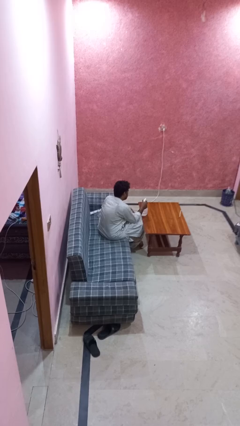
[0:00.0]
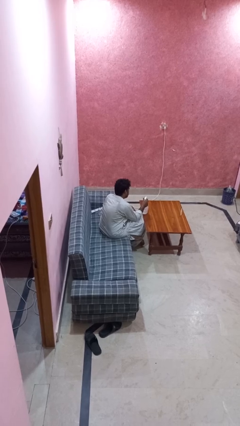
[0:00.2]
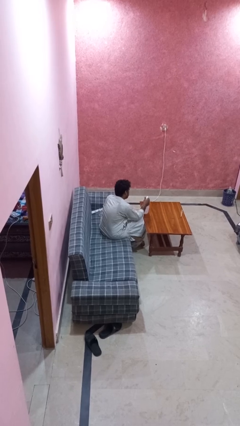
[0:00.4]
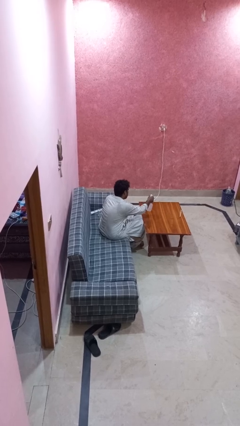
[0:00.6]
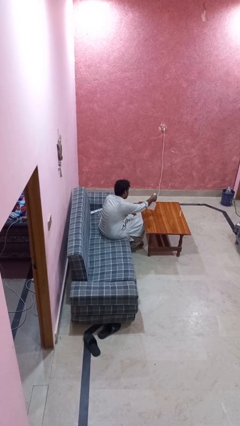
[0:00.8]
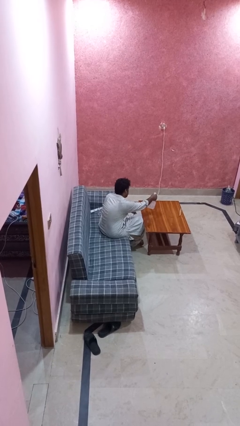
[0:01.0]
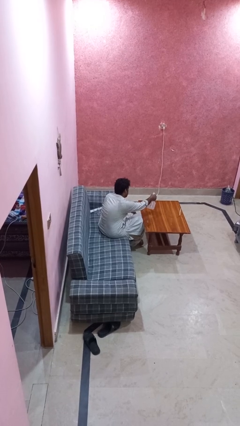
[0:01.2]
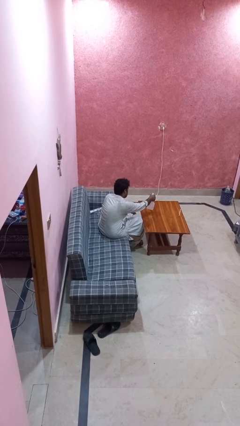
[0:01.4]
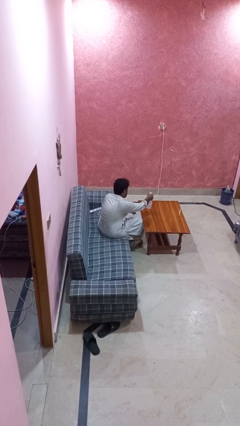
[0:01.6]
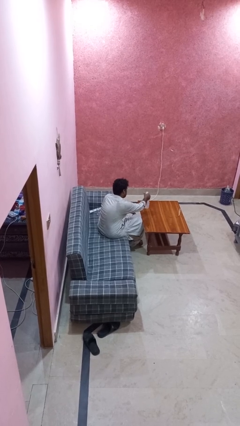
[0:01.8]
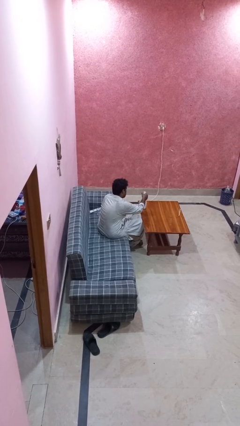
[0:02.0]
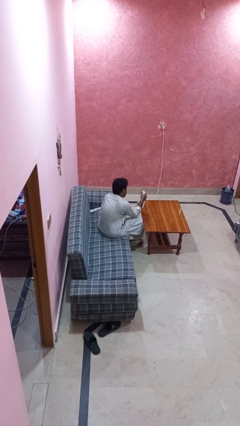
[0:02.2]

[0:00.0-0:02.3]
person sprays from bottle

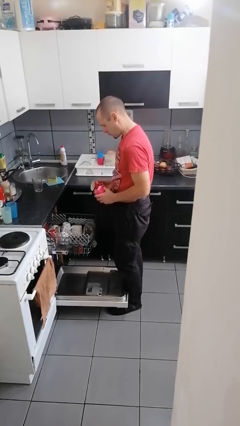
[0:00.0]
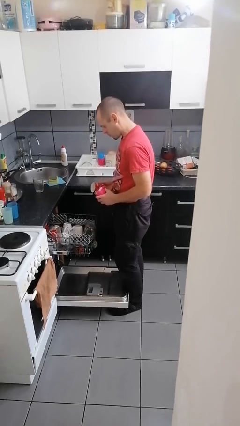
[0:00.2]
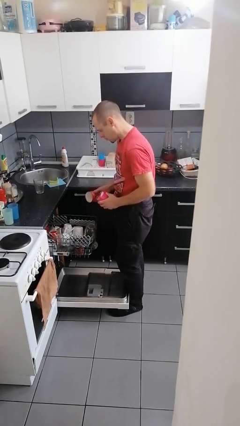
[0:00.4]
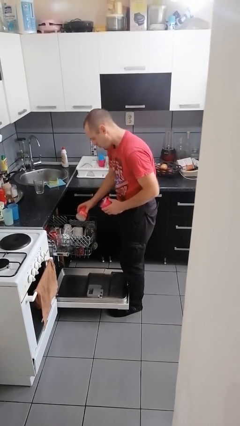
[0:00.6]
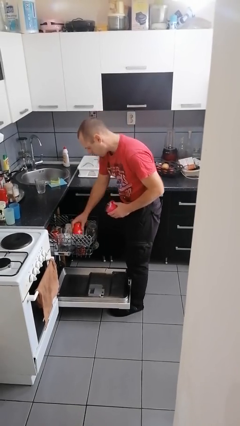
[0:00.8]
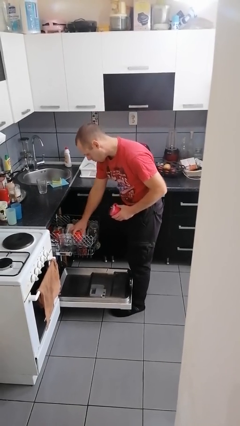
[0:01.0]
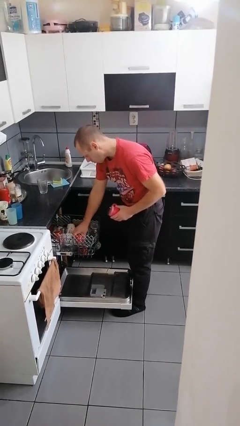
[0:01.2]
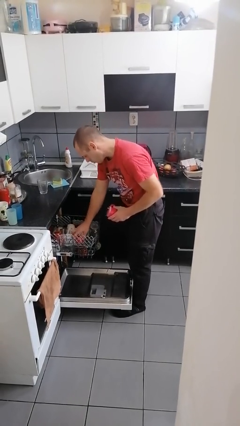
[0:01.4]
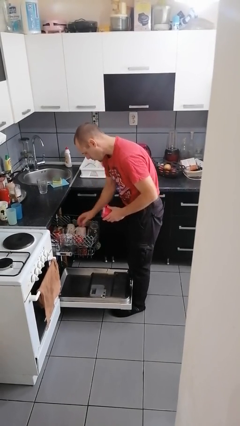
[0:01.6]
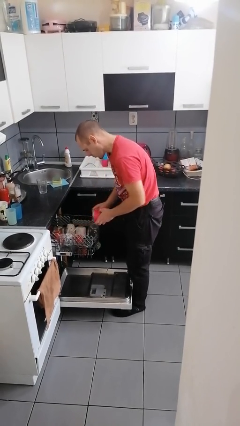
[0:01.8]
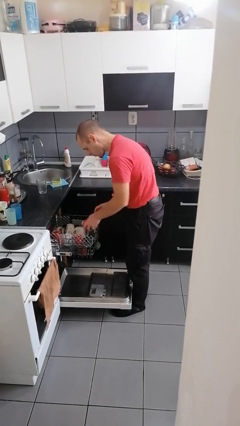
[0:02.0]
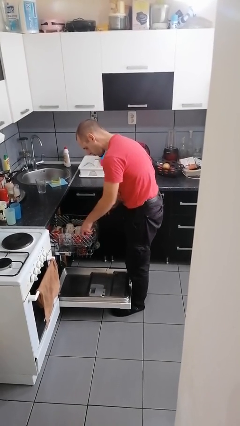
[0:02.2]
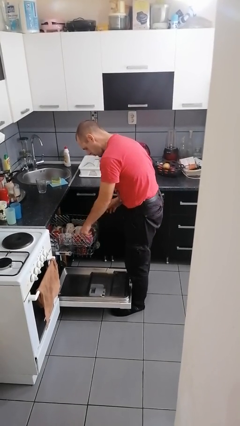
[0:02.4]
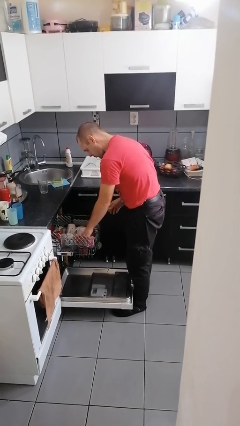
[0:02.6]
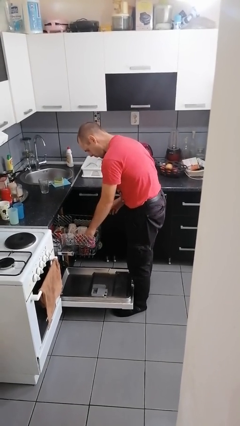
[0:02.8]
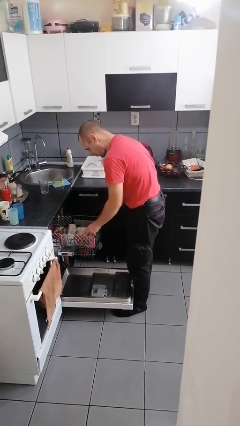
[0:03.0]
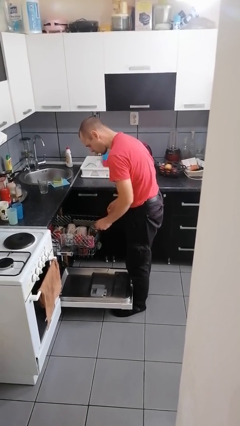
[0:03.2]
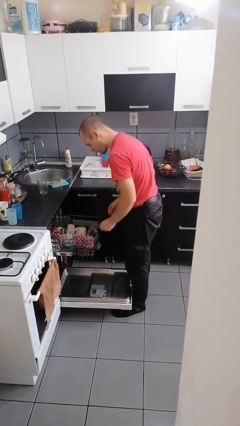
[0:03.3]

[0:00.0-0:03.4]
person loads dishwasher

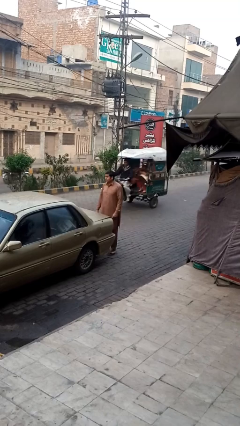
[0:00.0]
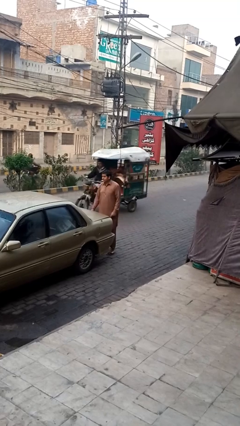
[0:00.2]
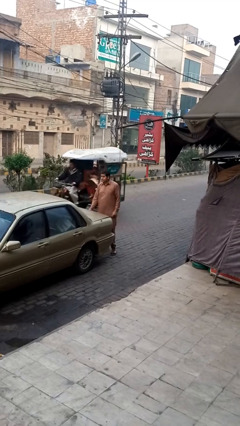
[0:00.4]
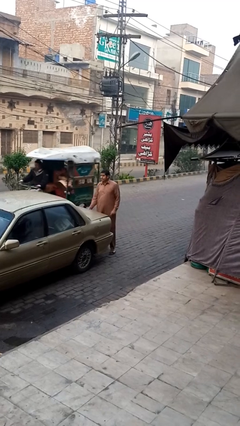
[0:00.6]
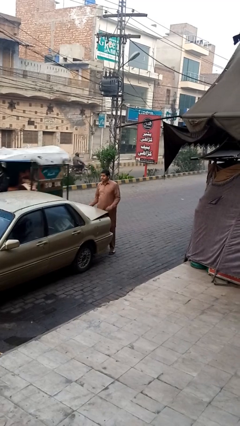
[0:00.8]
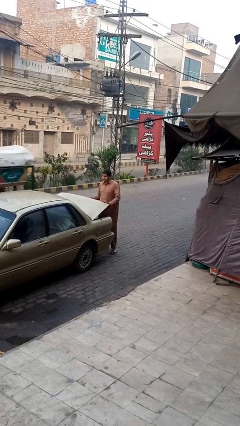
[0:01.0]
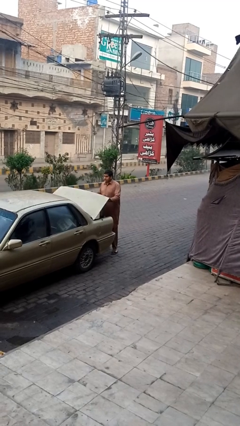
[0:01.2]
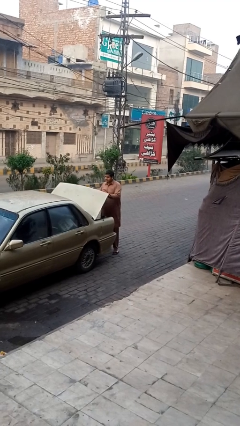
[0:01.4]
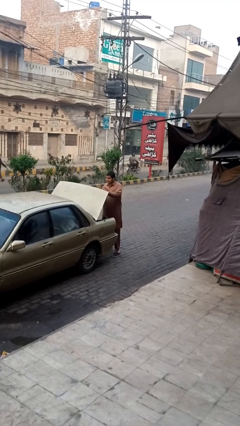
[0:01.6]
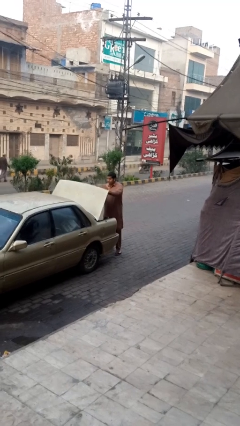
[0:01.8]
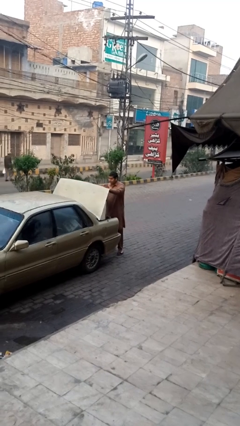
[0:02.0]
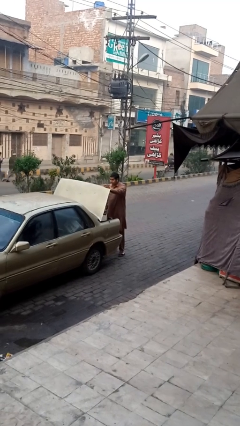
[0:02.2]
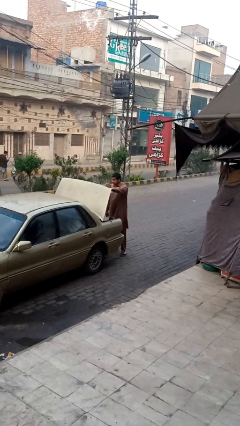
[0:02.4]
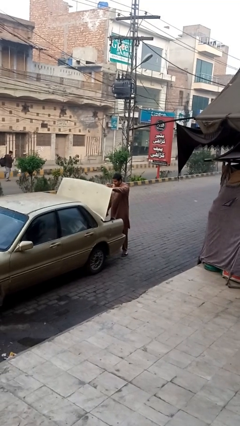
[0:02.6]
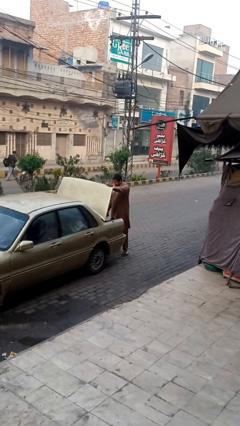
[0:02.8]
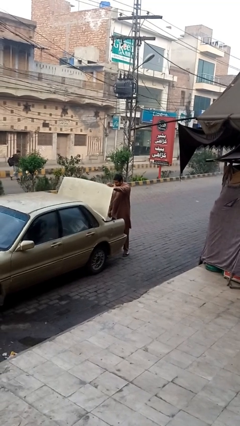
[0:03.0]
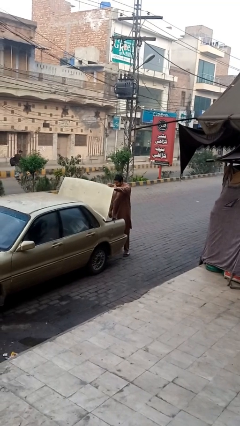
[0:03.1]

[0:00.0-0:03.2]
person opens car trunk

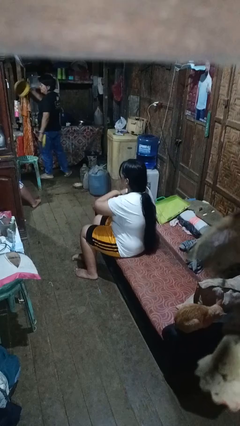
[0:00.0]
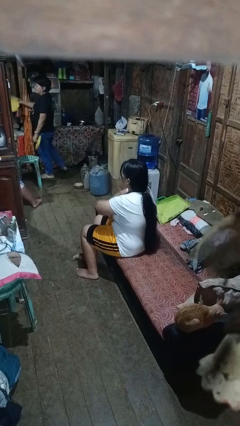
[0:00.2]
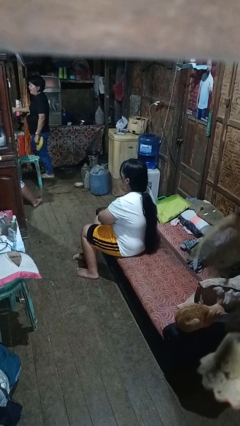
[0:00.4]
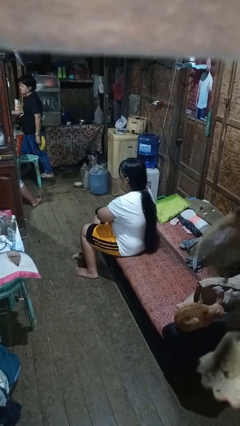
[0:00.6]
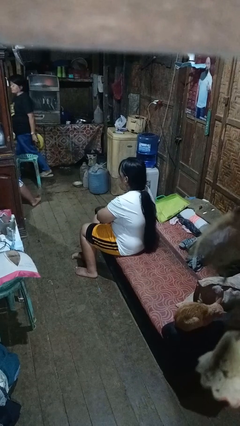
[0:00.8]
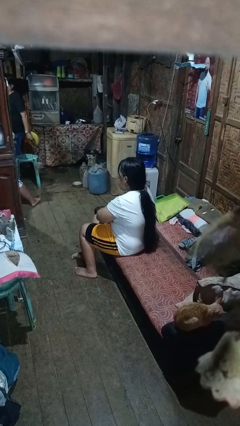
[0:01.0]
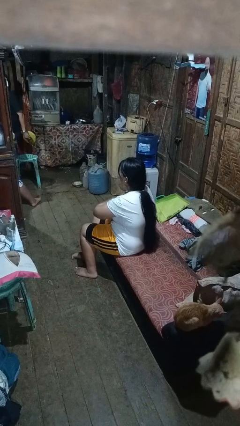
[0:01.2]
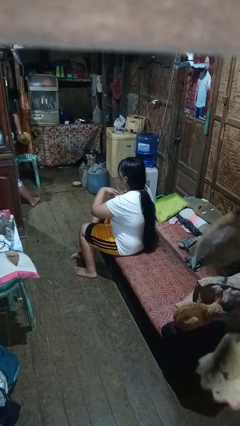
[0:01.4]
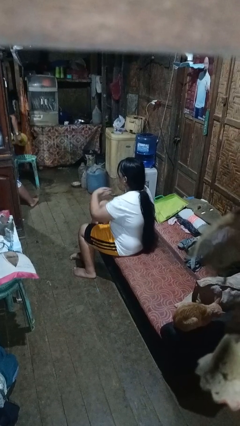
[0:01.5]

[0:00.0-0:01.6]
person gestures arms x

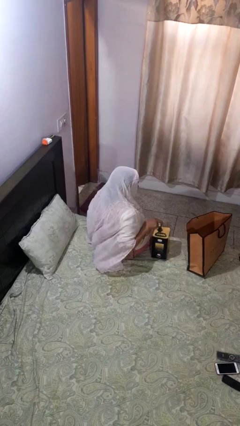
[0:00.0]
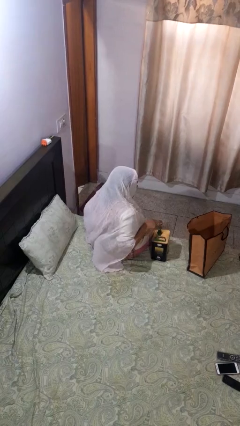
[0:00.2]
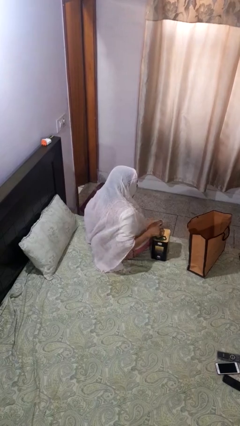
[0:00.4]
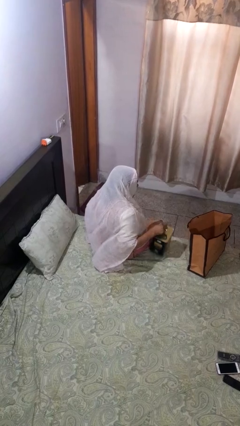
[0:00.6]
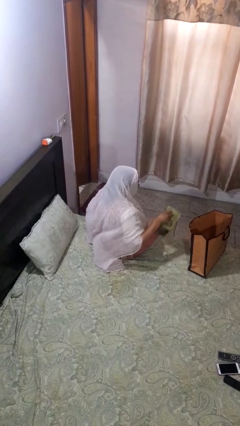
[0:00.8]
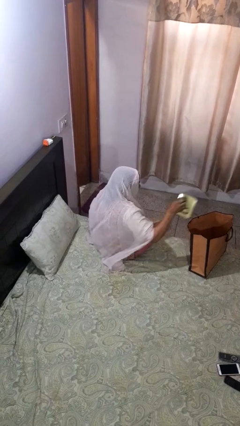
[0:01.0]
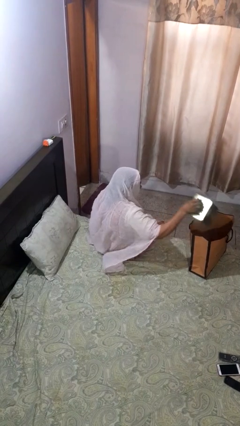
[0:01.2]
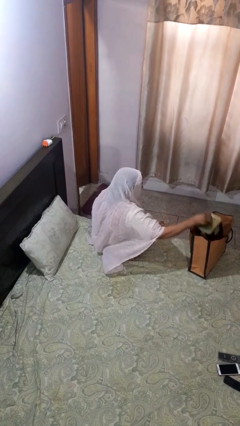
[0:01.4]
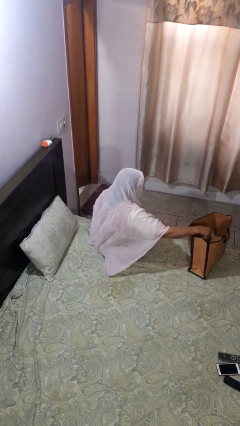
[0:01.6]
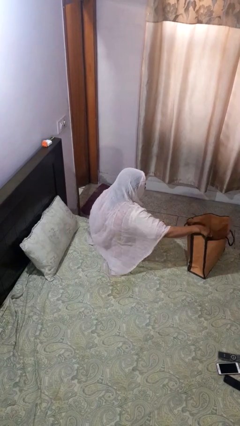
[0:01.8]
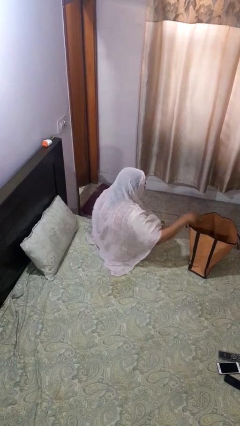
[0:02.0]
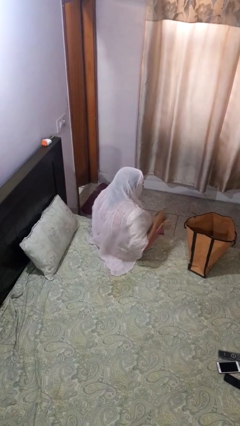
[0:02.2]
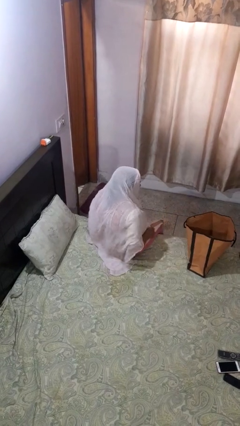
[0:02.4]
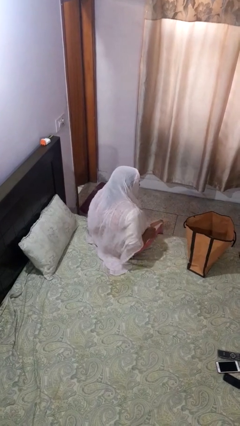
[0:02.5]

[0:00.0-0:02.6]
person puts object into bag

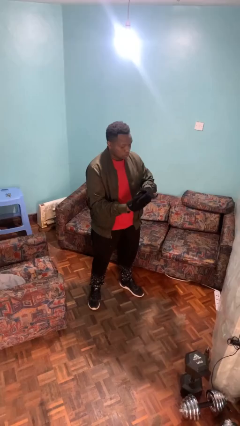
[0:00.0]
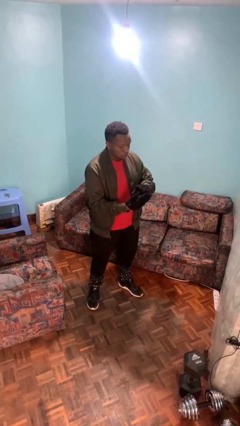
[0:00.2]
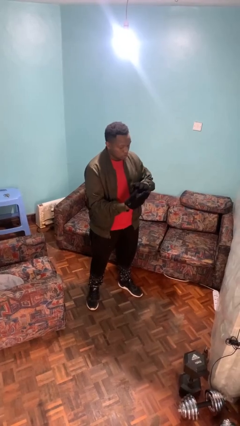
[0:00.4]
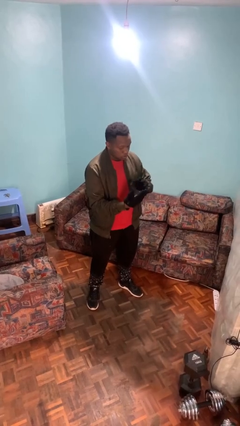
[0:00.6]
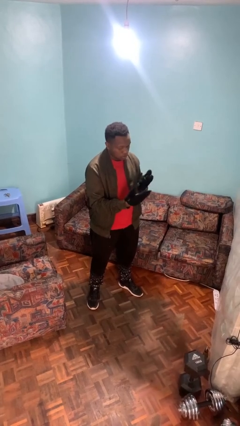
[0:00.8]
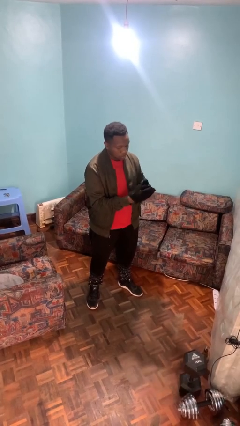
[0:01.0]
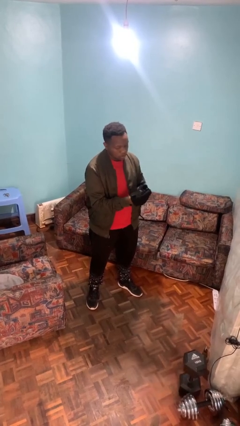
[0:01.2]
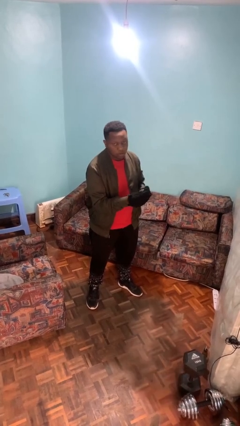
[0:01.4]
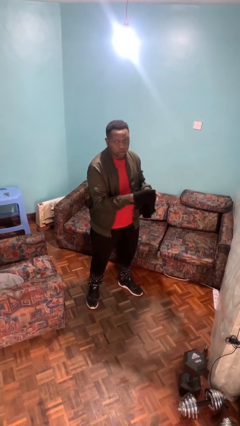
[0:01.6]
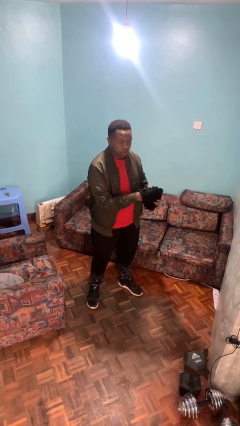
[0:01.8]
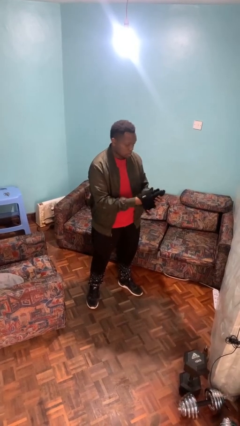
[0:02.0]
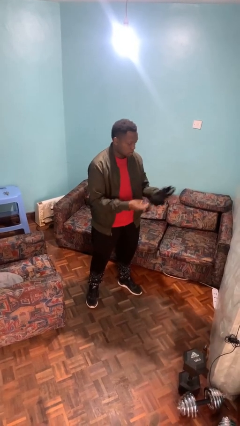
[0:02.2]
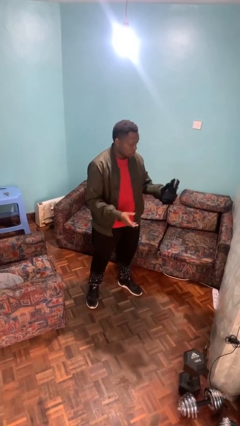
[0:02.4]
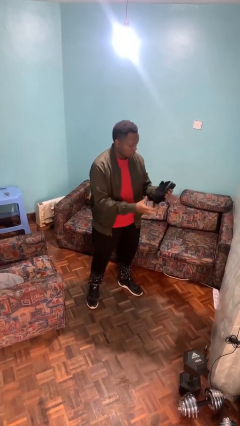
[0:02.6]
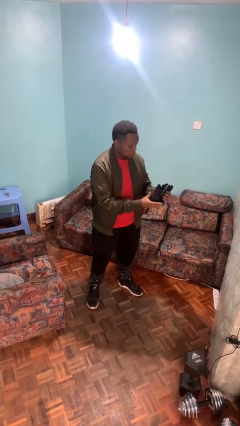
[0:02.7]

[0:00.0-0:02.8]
person takes off gloves

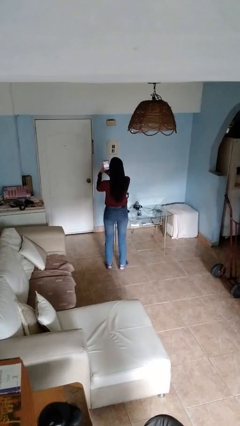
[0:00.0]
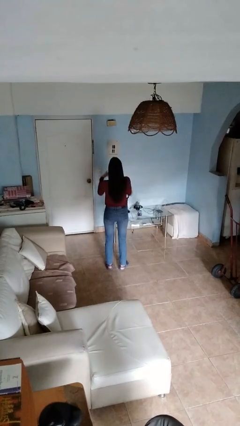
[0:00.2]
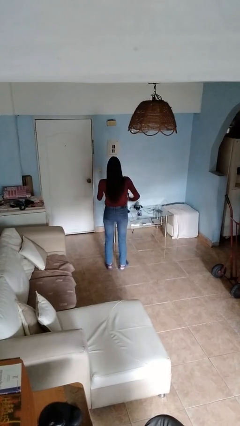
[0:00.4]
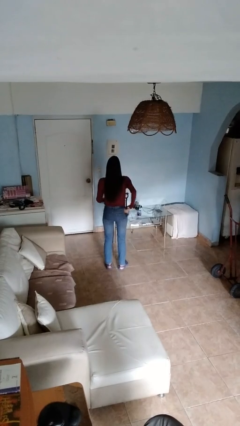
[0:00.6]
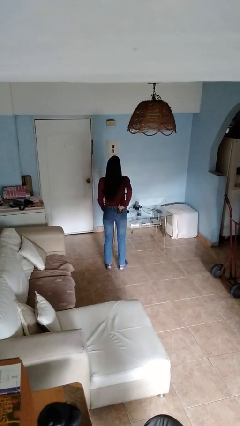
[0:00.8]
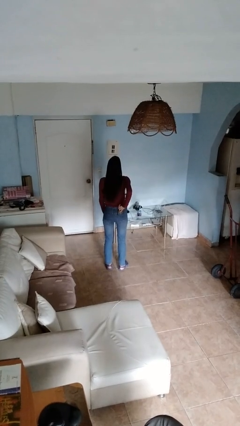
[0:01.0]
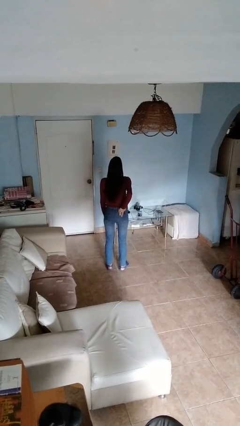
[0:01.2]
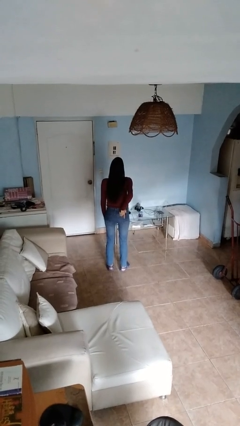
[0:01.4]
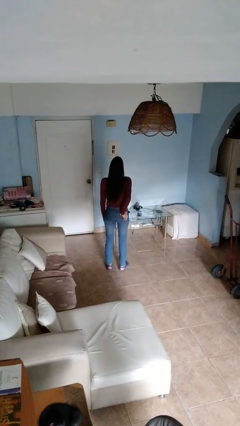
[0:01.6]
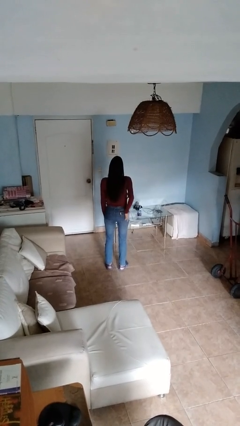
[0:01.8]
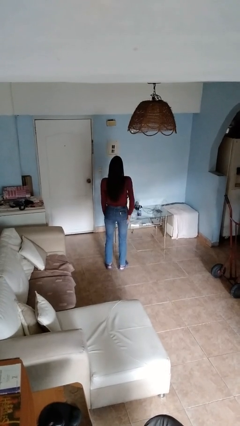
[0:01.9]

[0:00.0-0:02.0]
person puts phone into pocket
